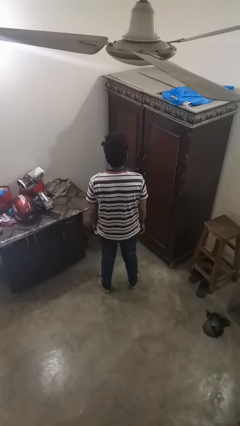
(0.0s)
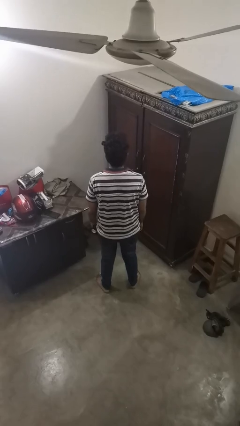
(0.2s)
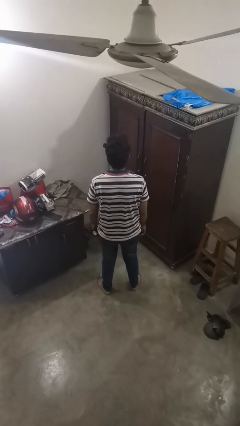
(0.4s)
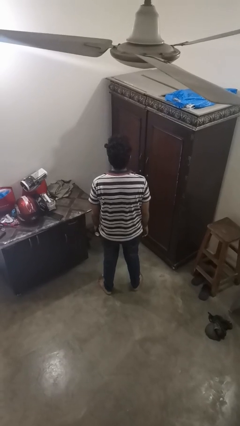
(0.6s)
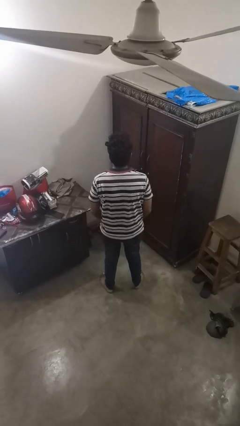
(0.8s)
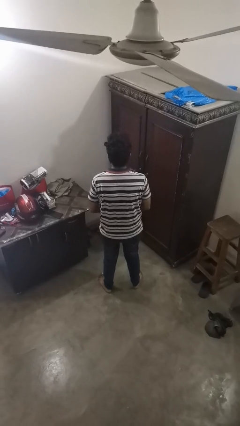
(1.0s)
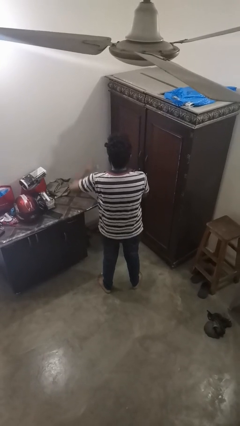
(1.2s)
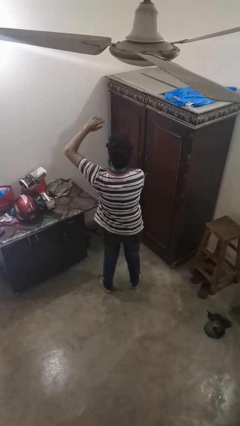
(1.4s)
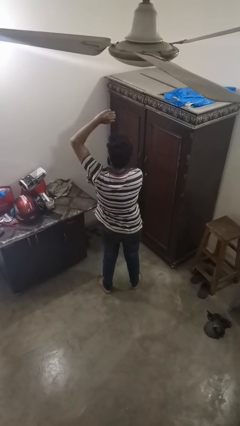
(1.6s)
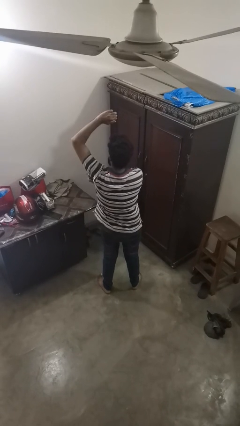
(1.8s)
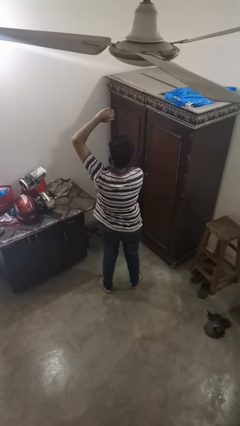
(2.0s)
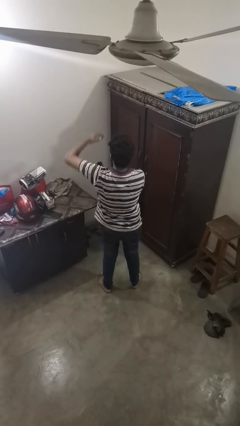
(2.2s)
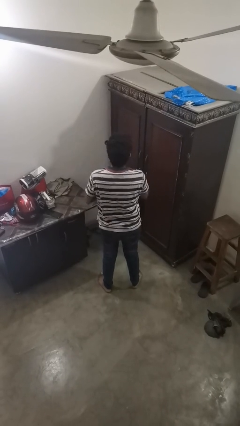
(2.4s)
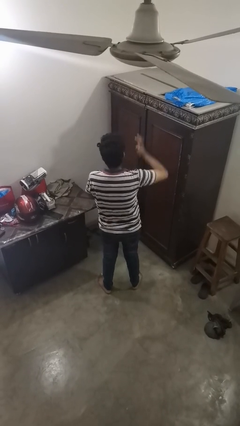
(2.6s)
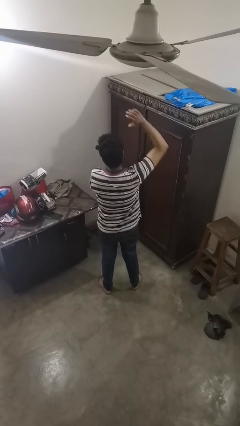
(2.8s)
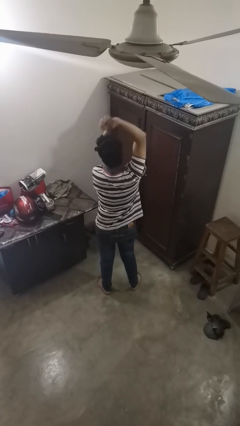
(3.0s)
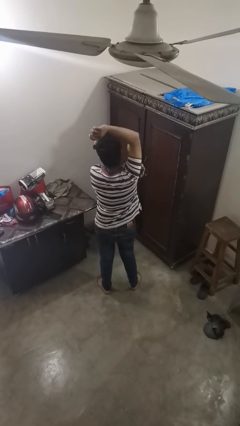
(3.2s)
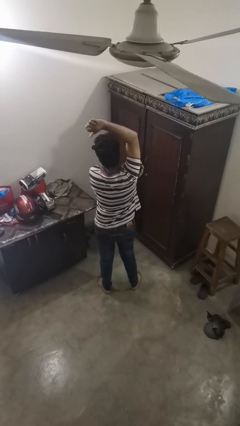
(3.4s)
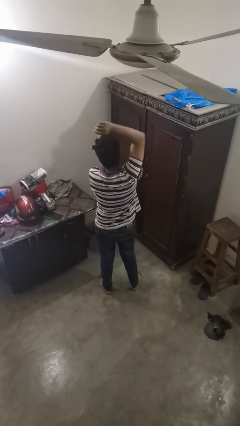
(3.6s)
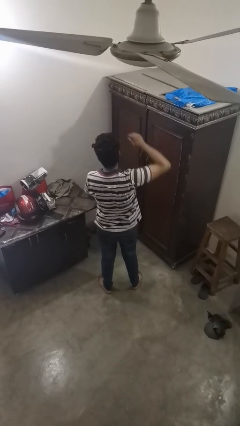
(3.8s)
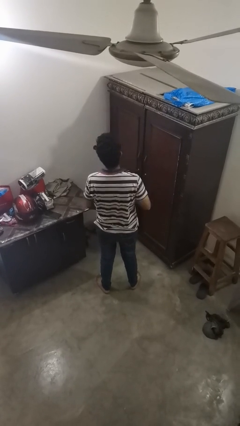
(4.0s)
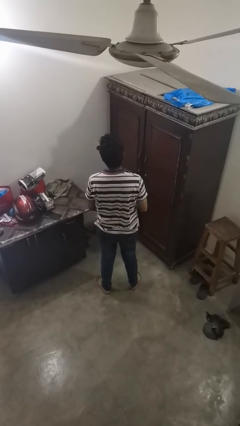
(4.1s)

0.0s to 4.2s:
person applies deodorant

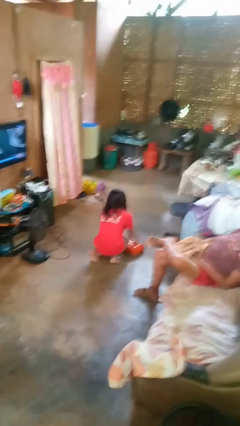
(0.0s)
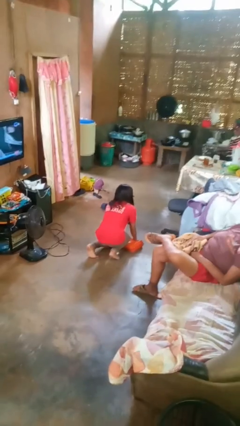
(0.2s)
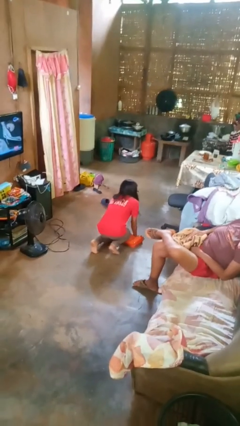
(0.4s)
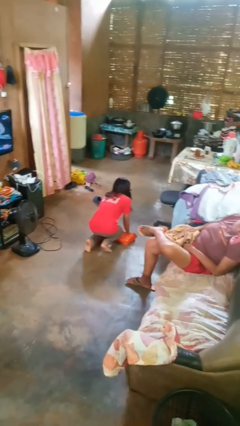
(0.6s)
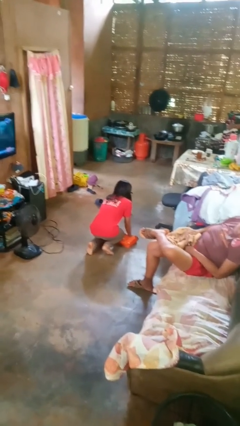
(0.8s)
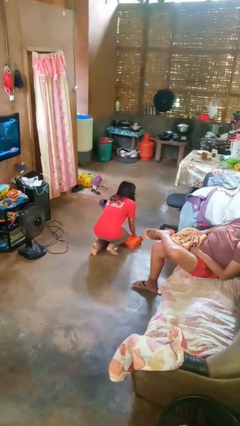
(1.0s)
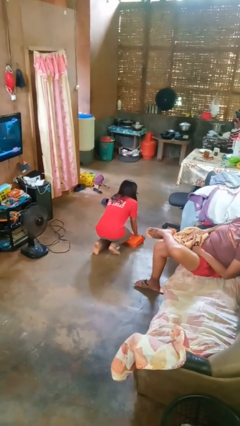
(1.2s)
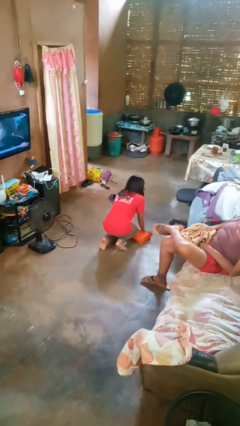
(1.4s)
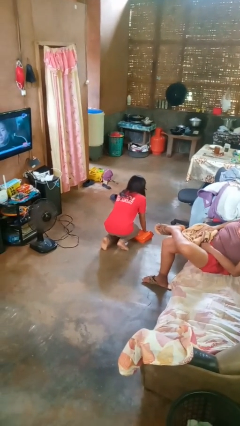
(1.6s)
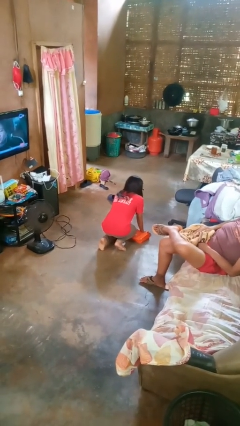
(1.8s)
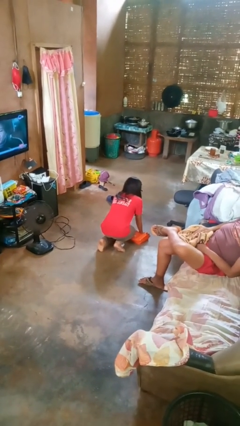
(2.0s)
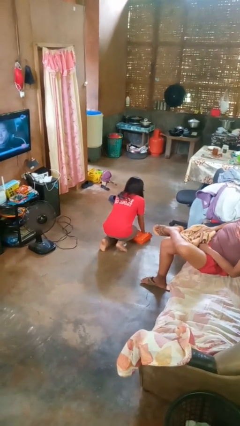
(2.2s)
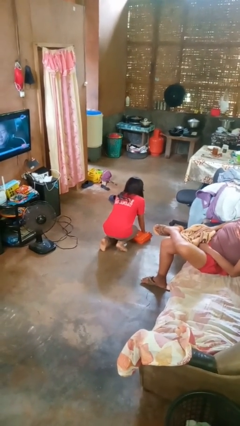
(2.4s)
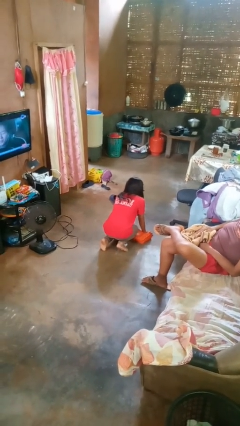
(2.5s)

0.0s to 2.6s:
person trips on object on floor

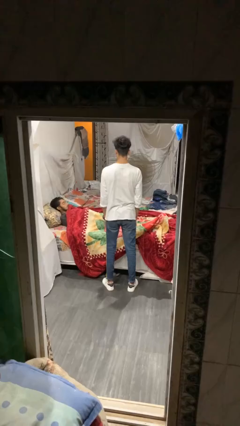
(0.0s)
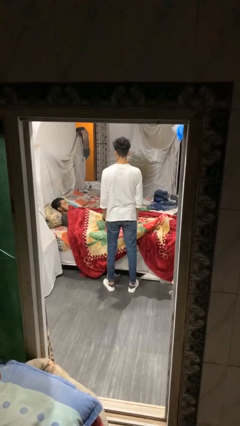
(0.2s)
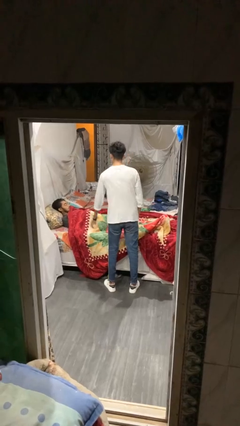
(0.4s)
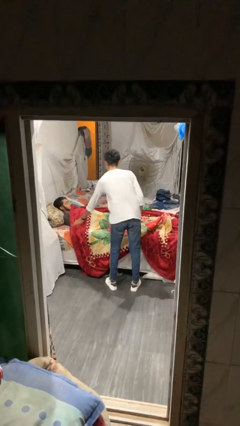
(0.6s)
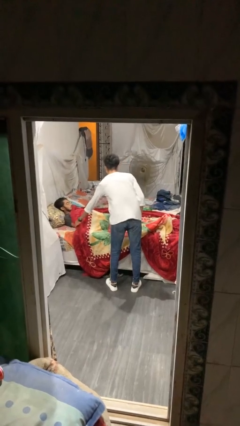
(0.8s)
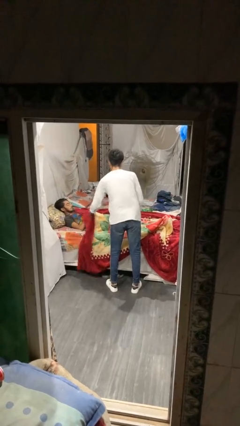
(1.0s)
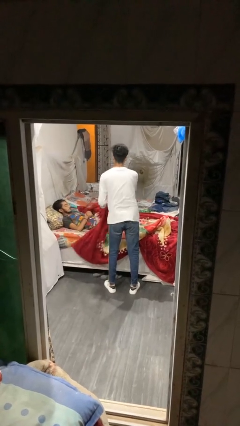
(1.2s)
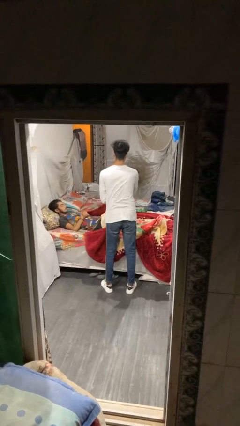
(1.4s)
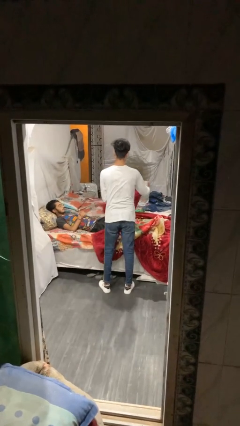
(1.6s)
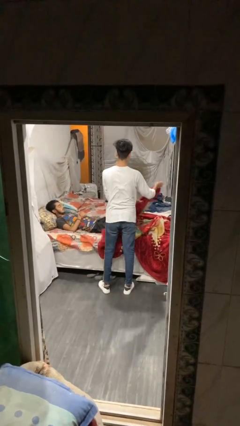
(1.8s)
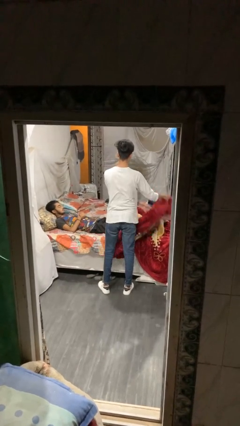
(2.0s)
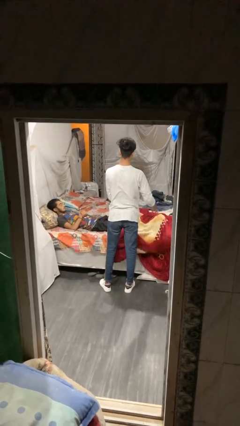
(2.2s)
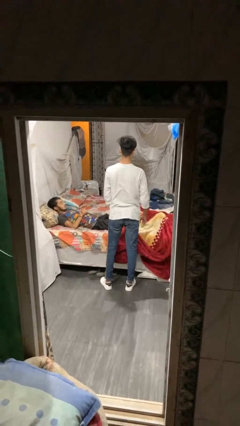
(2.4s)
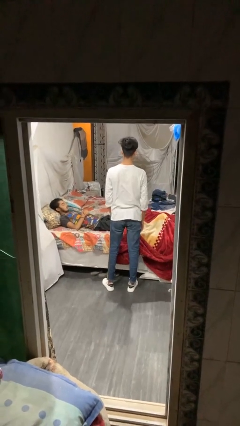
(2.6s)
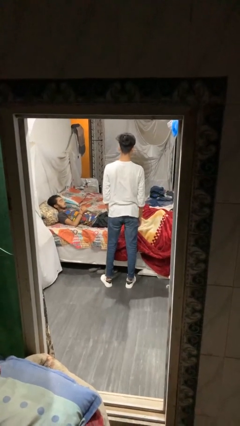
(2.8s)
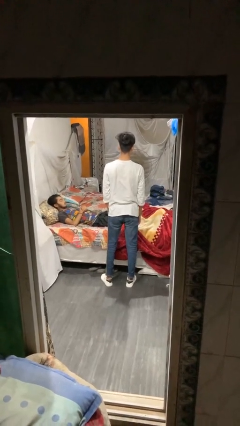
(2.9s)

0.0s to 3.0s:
person uncovers friend with blanket

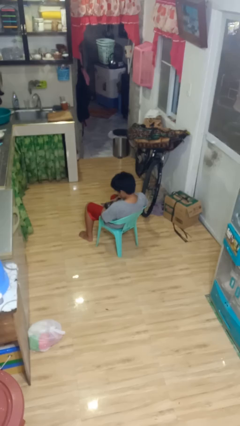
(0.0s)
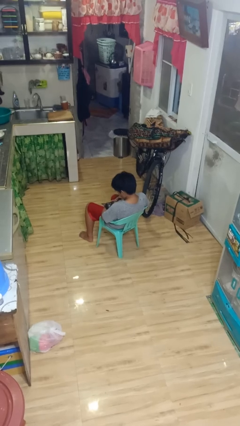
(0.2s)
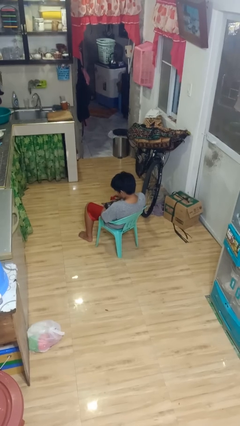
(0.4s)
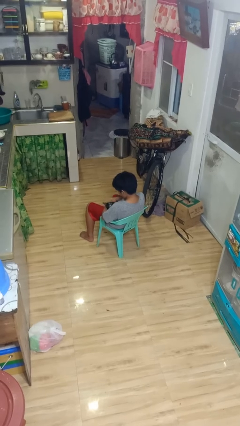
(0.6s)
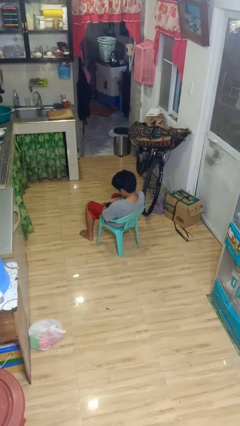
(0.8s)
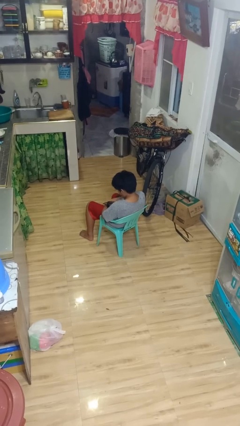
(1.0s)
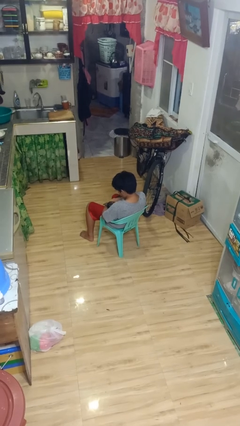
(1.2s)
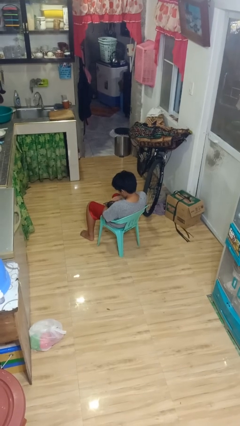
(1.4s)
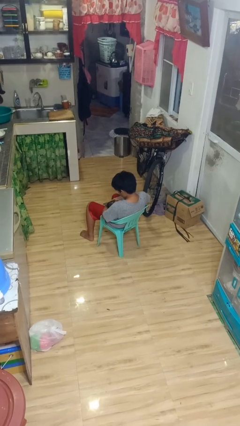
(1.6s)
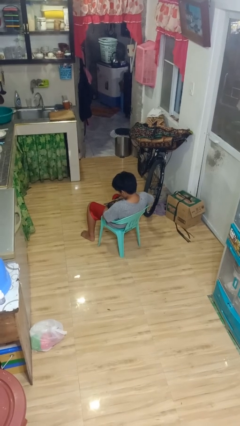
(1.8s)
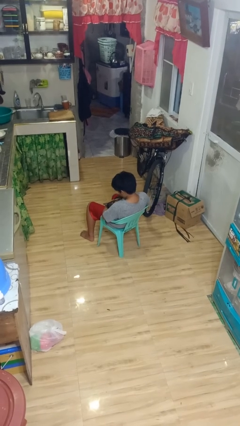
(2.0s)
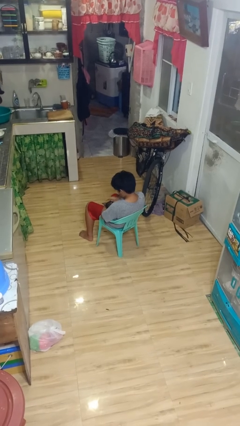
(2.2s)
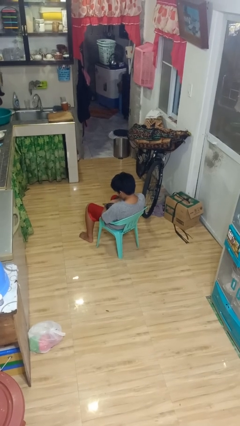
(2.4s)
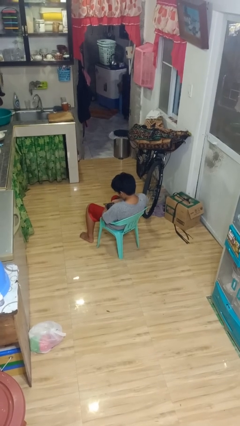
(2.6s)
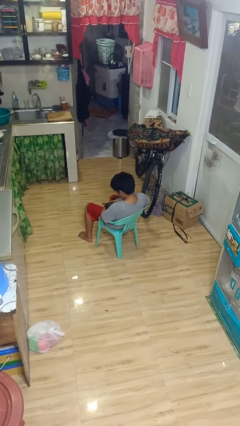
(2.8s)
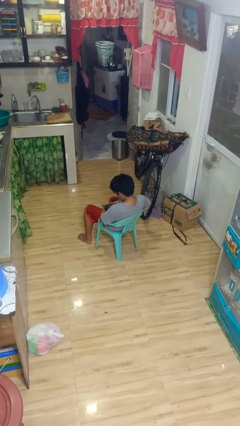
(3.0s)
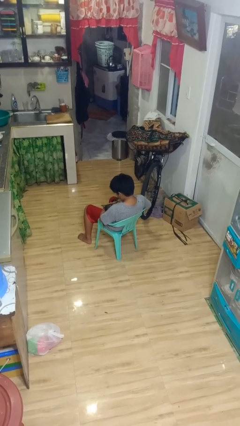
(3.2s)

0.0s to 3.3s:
person pets cat

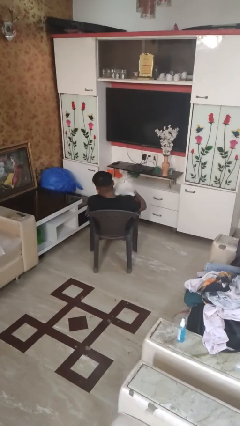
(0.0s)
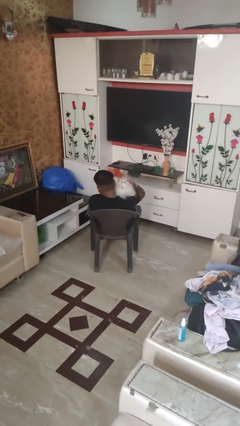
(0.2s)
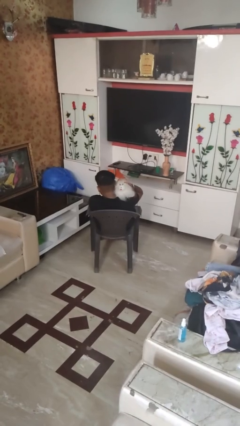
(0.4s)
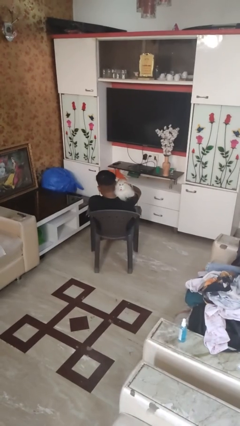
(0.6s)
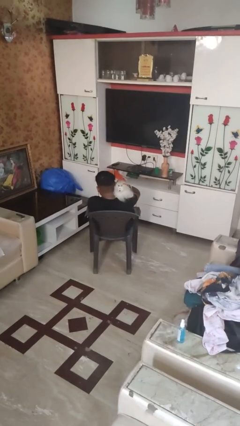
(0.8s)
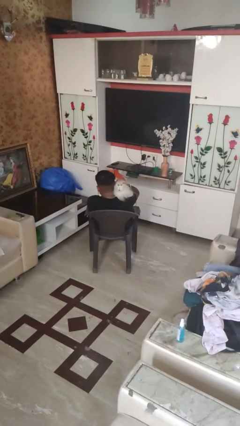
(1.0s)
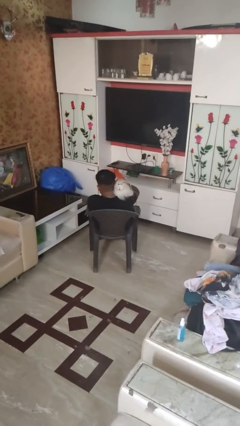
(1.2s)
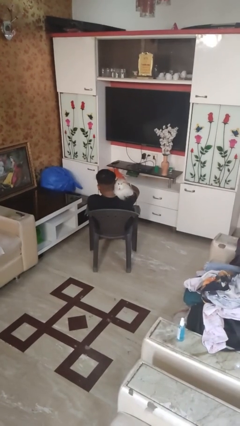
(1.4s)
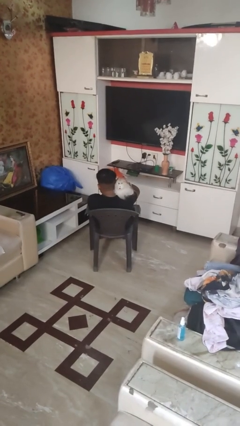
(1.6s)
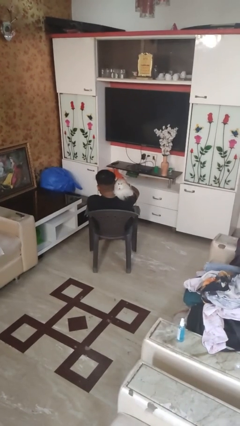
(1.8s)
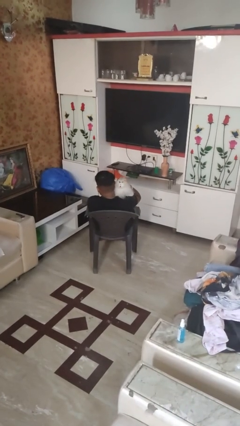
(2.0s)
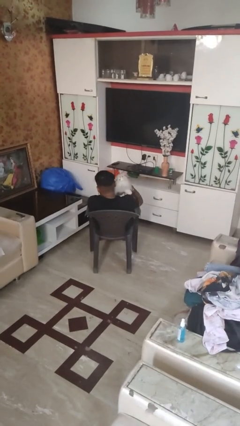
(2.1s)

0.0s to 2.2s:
person hugs stuffed animal

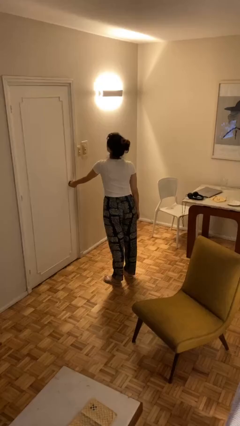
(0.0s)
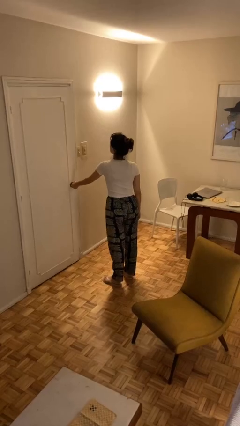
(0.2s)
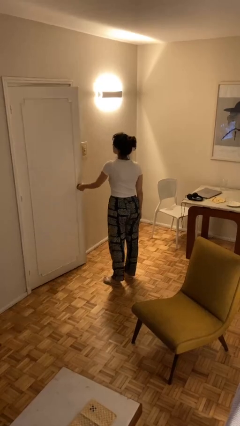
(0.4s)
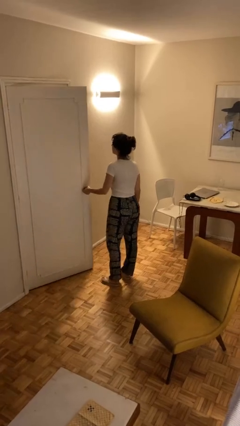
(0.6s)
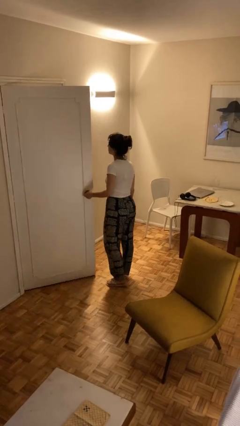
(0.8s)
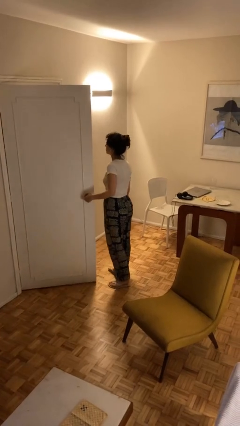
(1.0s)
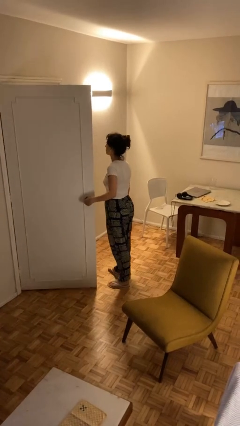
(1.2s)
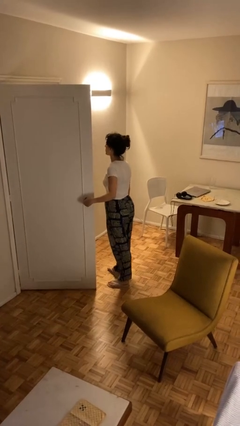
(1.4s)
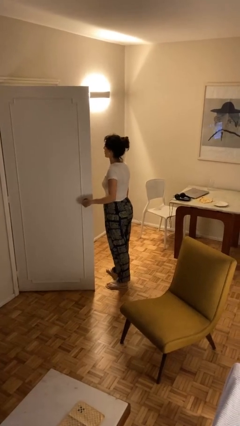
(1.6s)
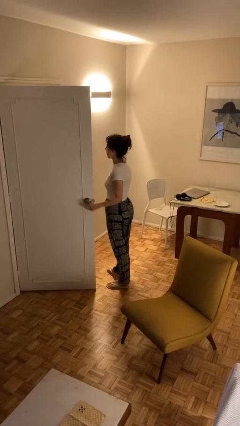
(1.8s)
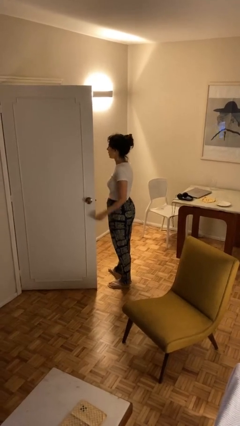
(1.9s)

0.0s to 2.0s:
person opens facility door

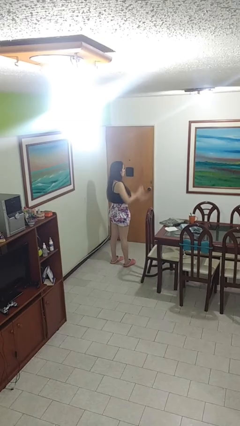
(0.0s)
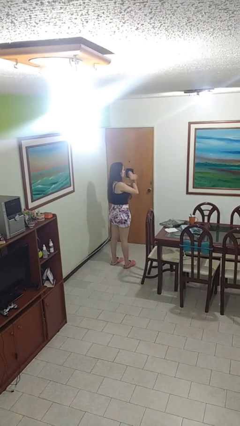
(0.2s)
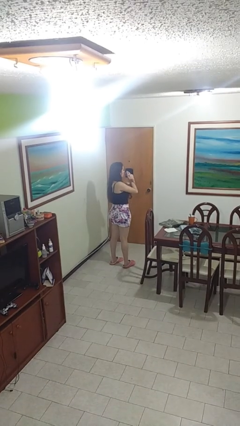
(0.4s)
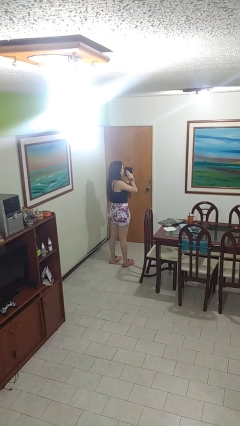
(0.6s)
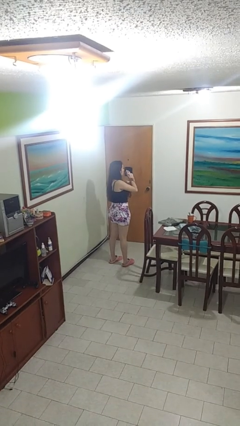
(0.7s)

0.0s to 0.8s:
person gestures arms x
